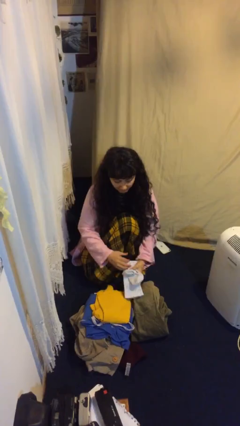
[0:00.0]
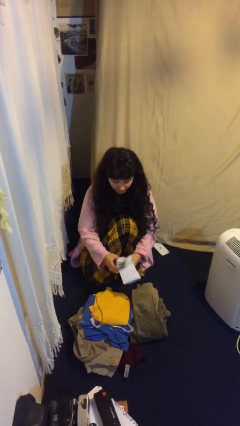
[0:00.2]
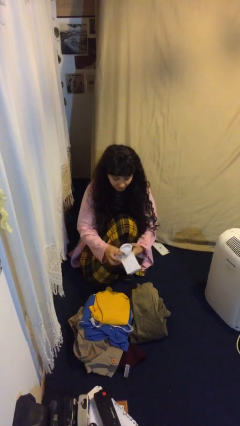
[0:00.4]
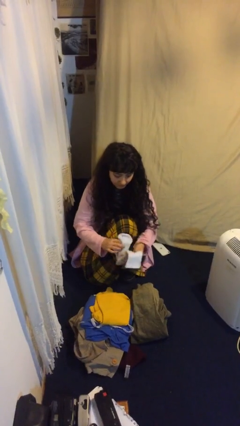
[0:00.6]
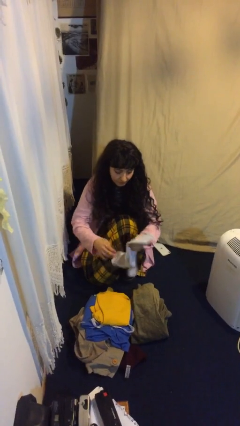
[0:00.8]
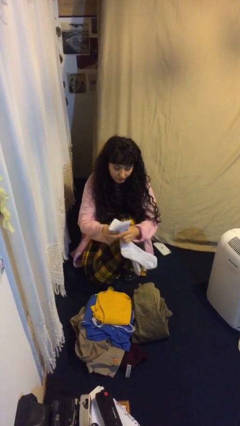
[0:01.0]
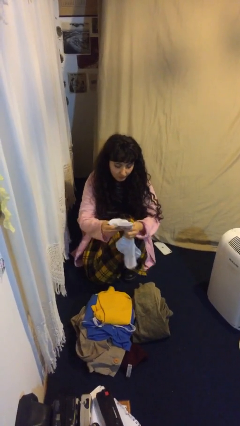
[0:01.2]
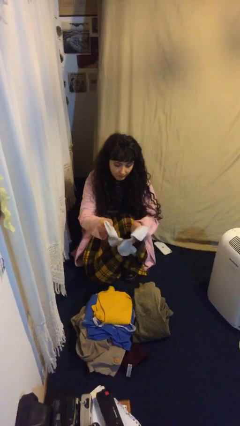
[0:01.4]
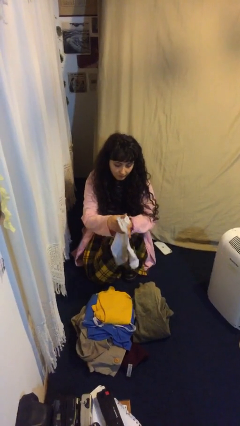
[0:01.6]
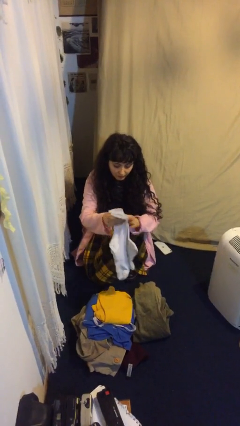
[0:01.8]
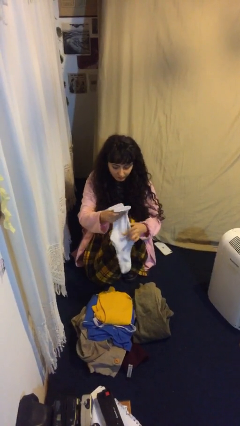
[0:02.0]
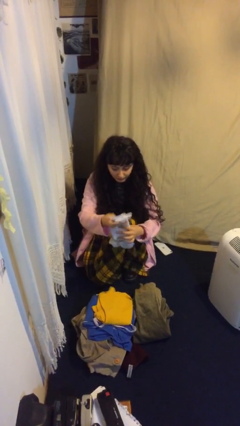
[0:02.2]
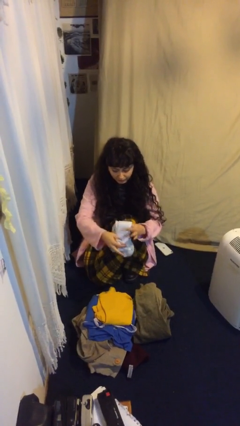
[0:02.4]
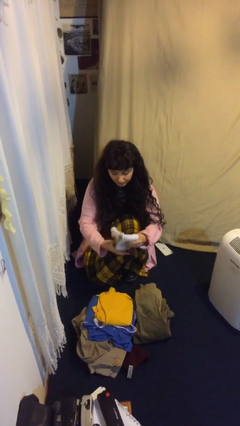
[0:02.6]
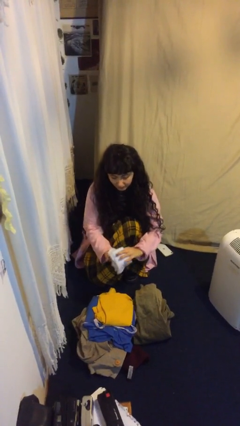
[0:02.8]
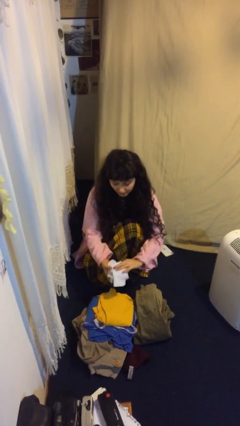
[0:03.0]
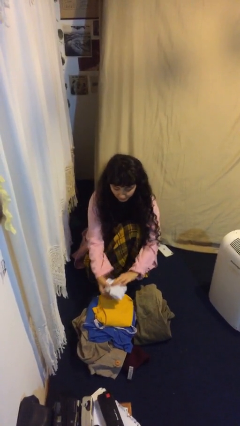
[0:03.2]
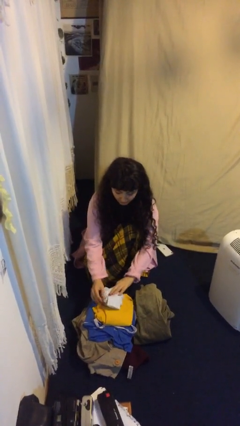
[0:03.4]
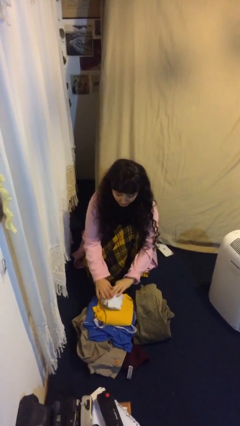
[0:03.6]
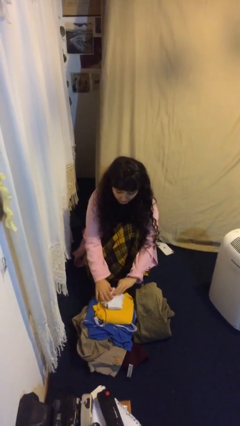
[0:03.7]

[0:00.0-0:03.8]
person folds socks

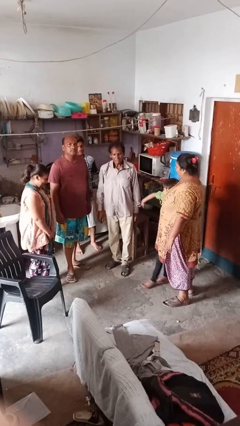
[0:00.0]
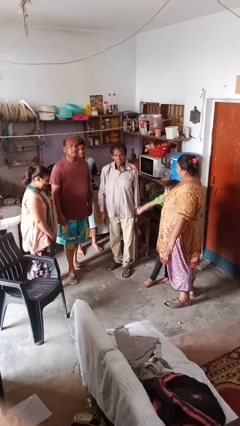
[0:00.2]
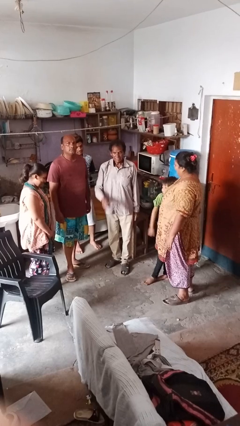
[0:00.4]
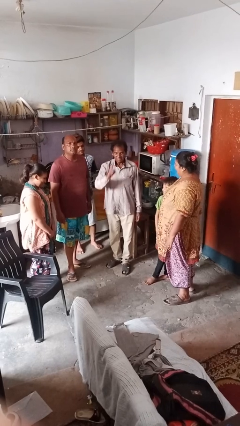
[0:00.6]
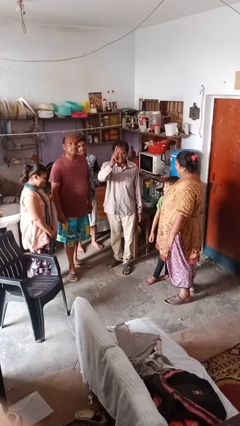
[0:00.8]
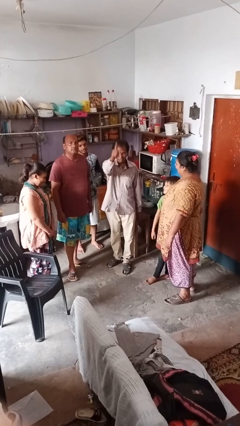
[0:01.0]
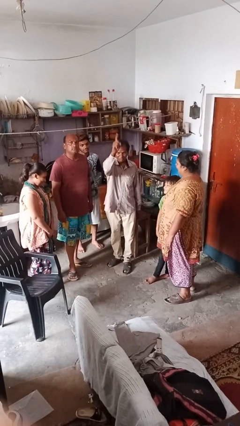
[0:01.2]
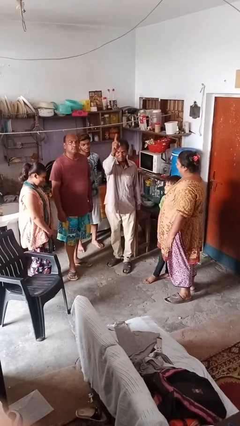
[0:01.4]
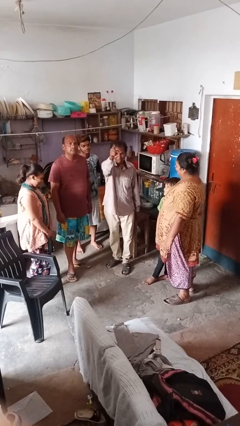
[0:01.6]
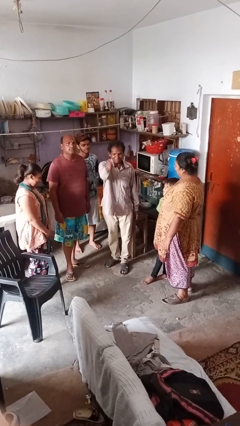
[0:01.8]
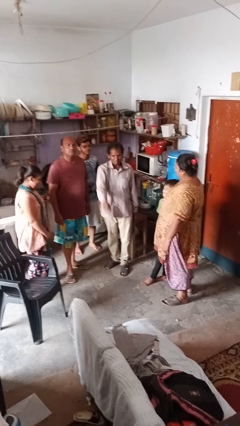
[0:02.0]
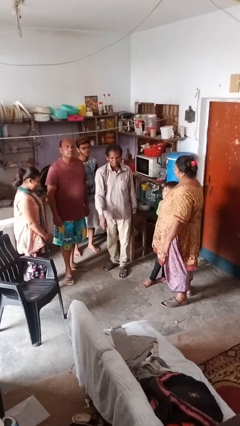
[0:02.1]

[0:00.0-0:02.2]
person points at person

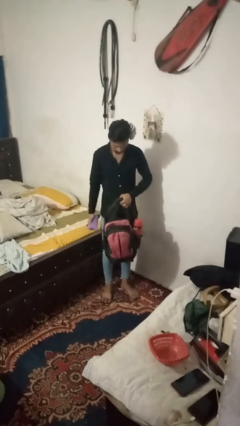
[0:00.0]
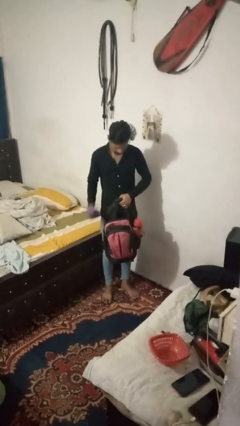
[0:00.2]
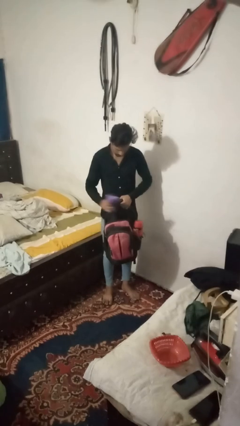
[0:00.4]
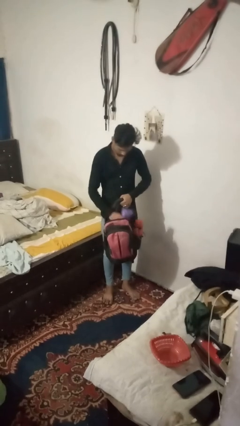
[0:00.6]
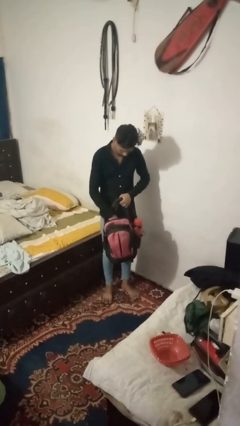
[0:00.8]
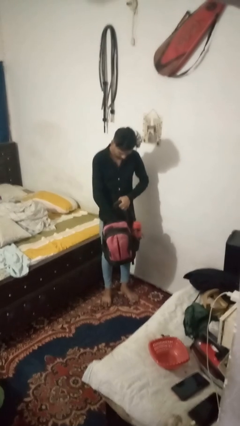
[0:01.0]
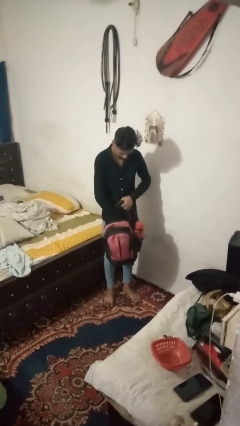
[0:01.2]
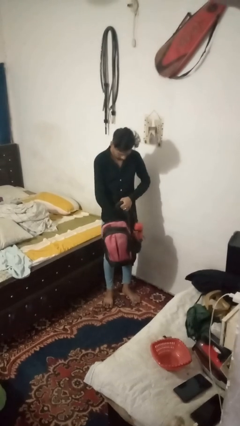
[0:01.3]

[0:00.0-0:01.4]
person puts object into bag

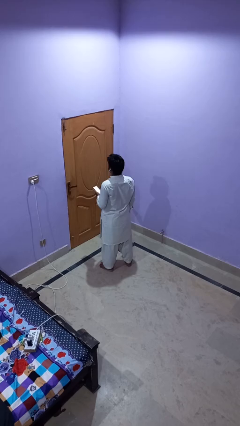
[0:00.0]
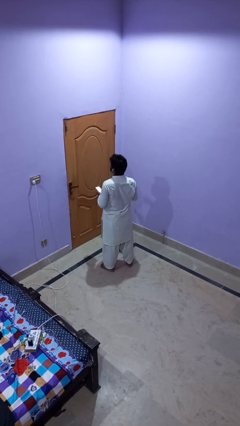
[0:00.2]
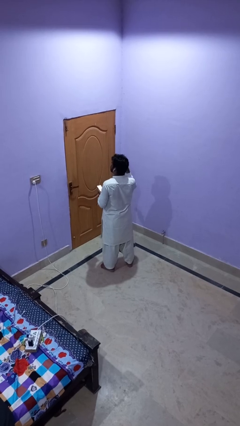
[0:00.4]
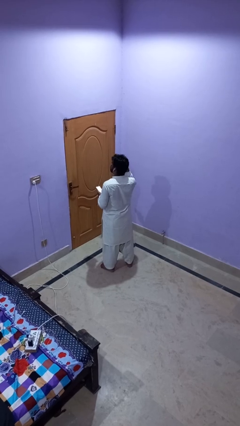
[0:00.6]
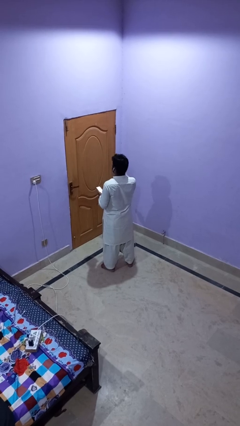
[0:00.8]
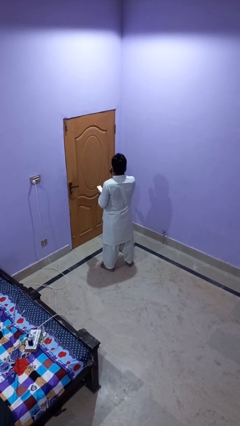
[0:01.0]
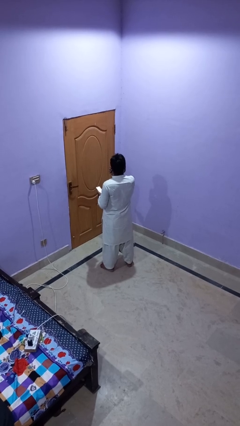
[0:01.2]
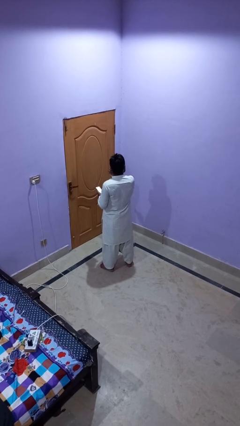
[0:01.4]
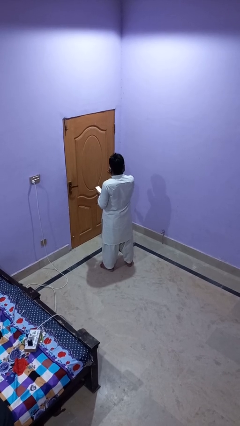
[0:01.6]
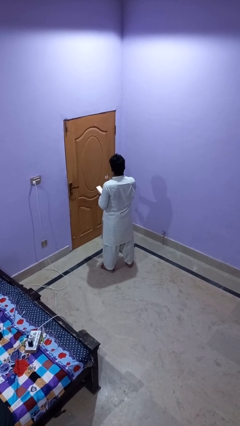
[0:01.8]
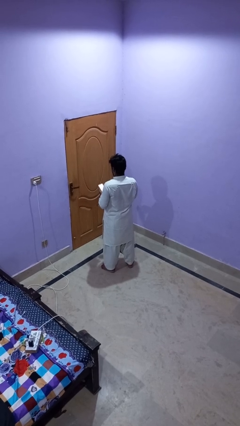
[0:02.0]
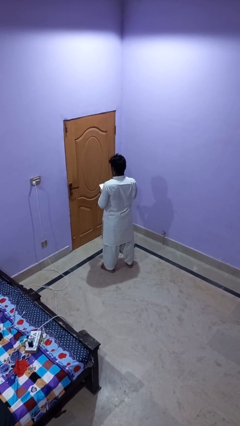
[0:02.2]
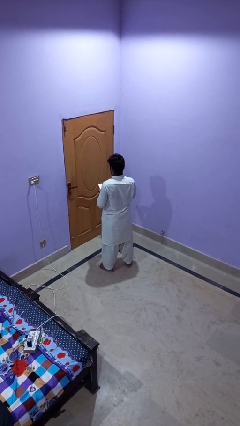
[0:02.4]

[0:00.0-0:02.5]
person takes off headphones

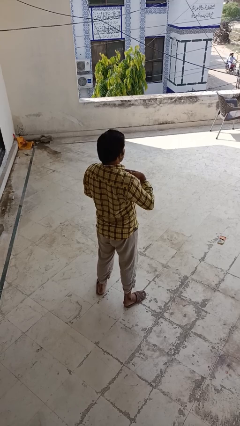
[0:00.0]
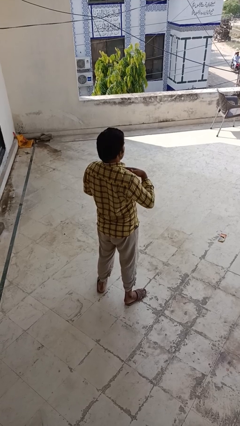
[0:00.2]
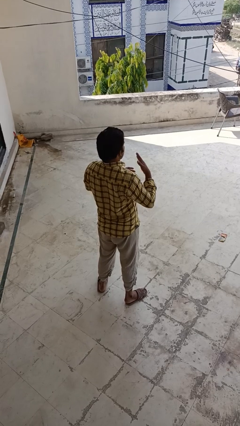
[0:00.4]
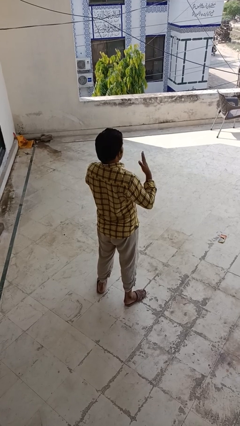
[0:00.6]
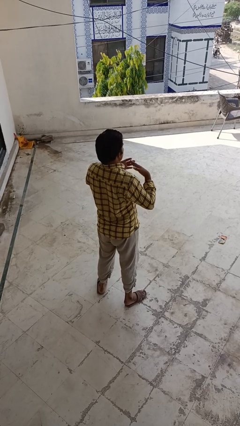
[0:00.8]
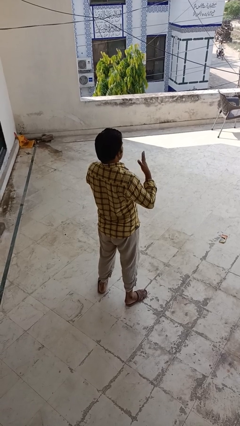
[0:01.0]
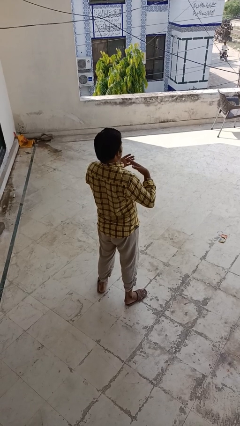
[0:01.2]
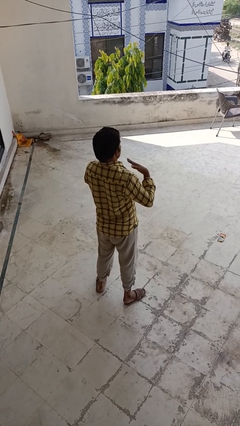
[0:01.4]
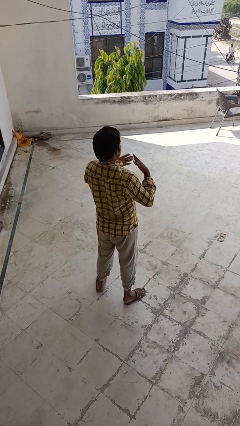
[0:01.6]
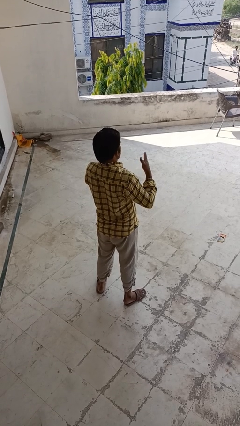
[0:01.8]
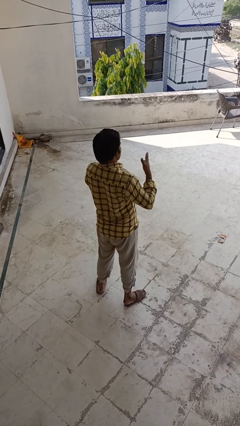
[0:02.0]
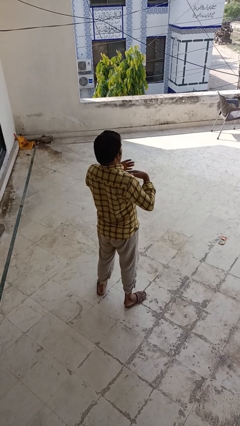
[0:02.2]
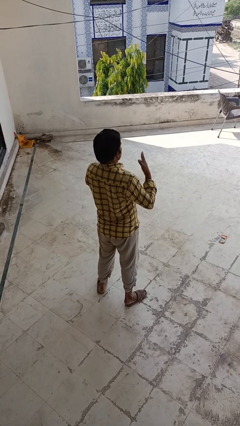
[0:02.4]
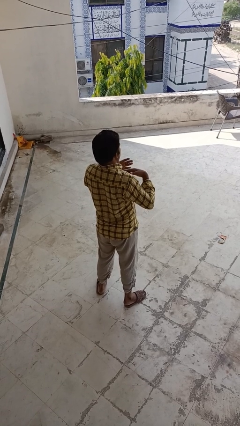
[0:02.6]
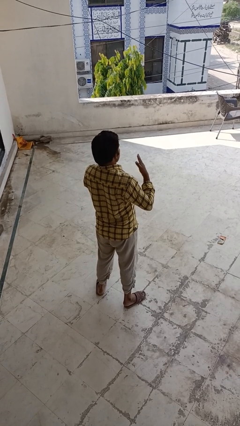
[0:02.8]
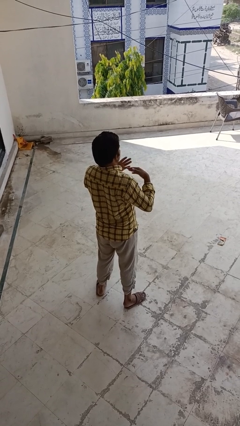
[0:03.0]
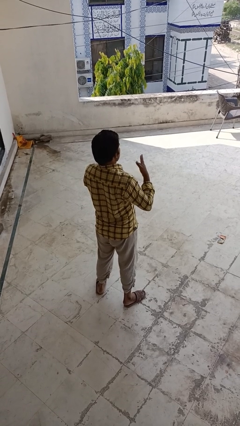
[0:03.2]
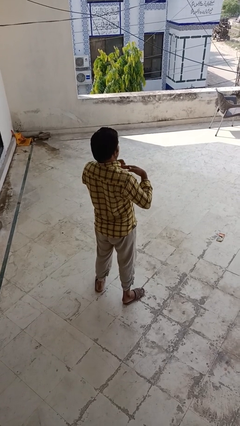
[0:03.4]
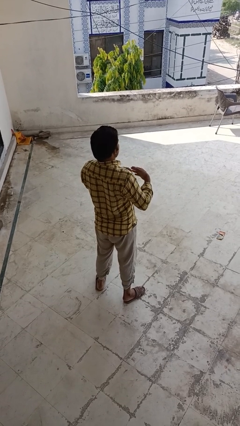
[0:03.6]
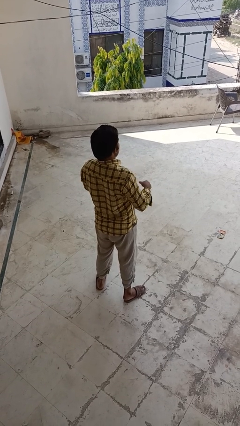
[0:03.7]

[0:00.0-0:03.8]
person drums on chest

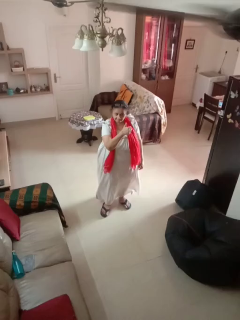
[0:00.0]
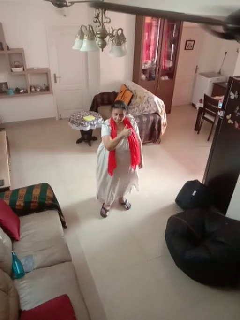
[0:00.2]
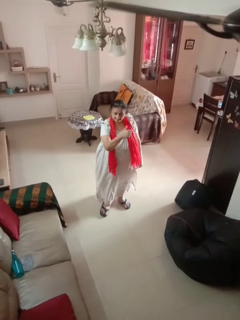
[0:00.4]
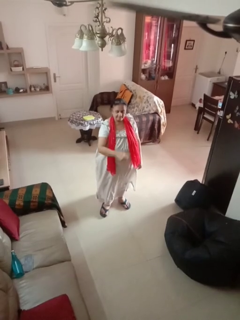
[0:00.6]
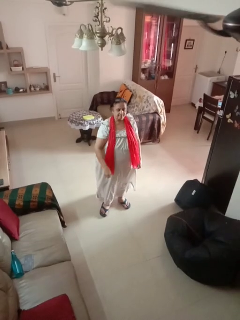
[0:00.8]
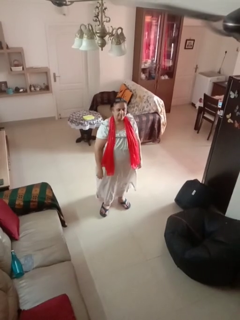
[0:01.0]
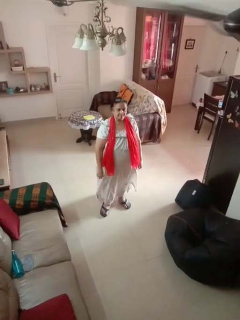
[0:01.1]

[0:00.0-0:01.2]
person gestures thumbs up

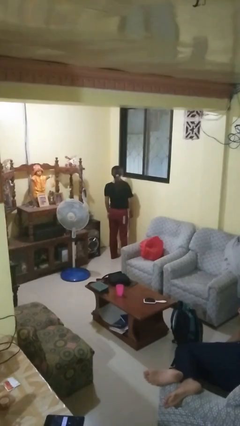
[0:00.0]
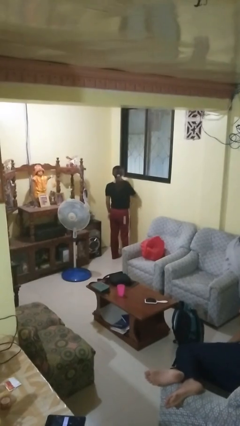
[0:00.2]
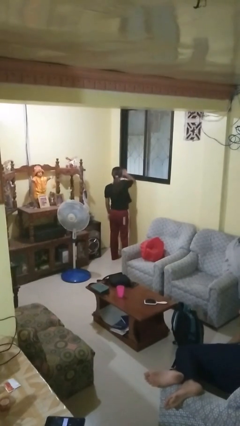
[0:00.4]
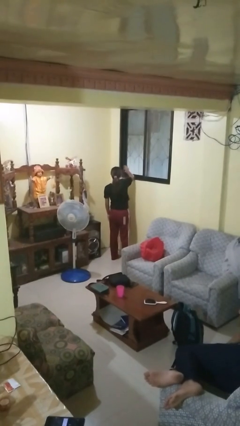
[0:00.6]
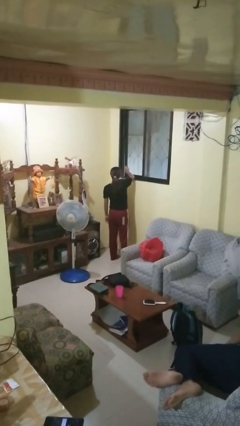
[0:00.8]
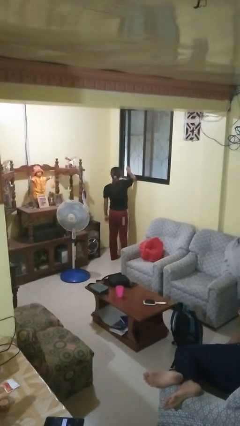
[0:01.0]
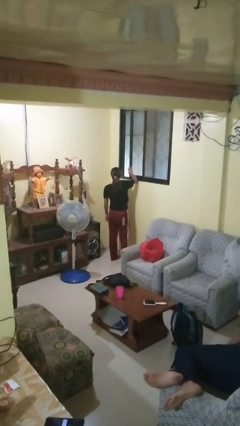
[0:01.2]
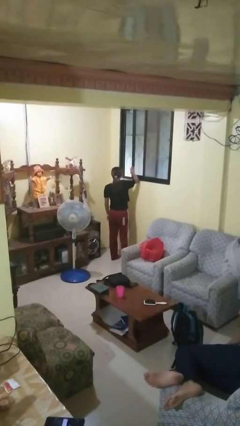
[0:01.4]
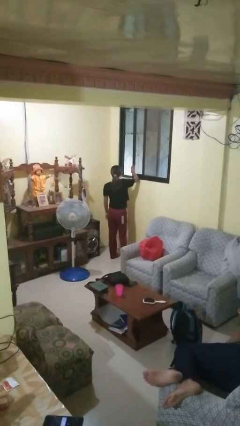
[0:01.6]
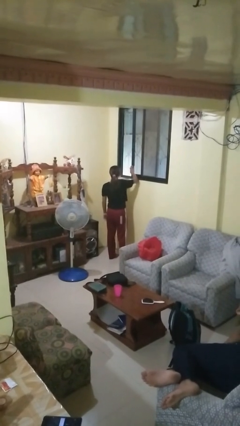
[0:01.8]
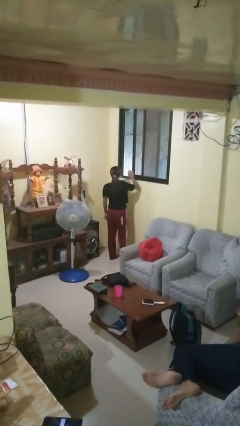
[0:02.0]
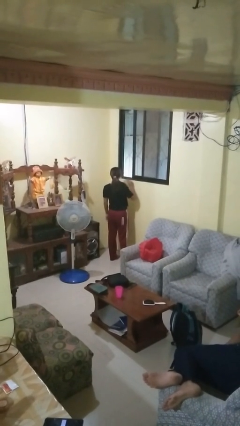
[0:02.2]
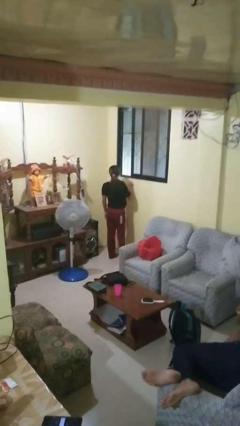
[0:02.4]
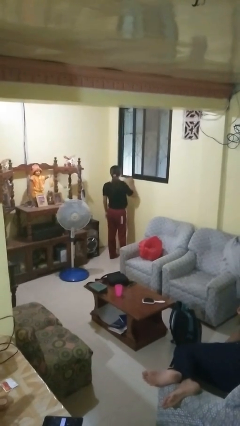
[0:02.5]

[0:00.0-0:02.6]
person opens home window
